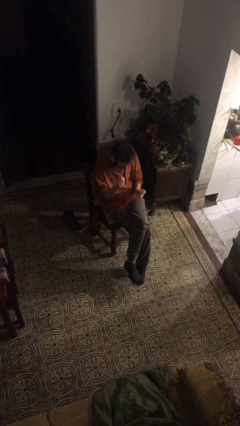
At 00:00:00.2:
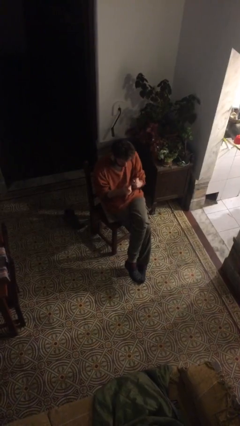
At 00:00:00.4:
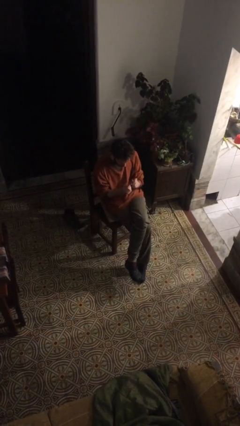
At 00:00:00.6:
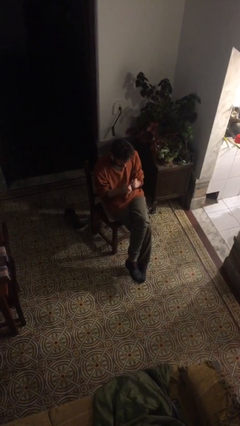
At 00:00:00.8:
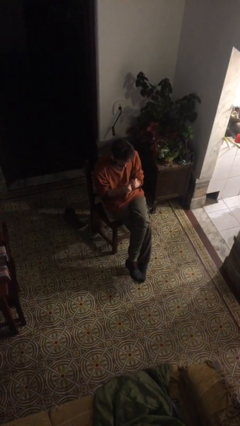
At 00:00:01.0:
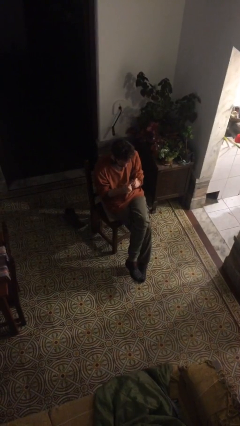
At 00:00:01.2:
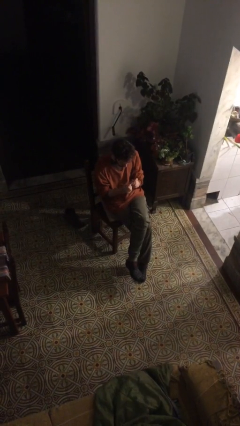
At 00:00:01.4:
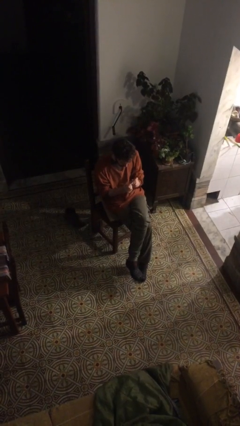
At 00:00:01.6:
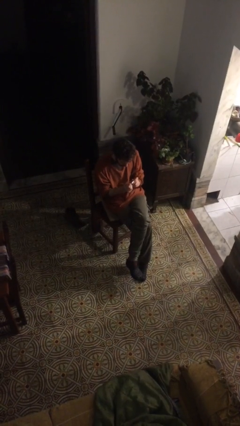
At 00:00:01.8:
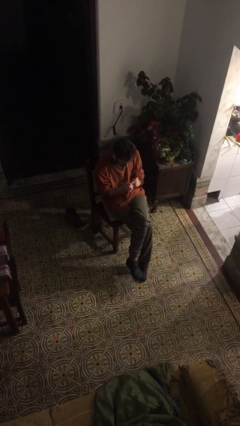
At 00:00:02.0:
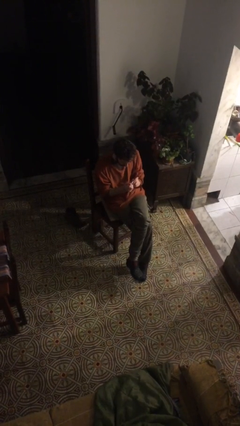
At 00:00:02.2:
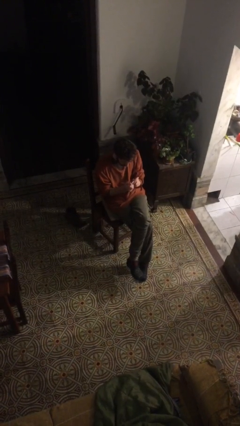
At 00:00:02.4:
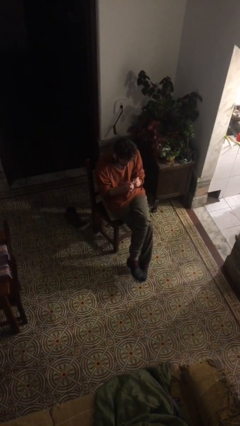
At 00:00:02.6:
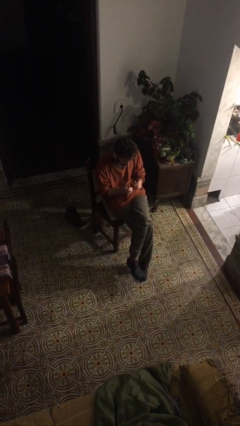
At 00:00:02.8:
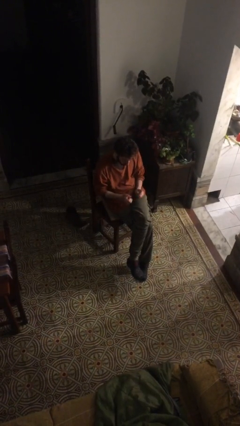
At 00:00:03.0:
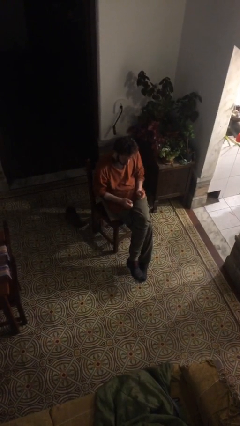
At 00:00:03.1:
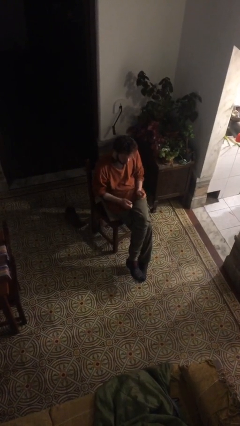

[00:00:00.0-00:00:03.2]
person clips fingernails

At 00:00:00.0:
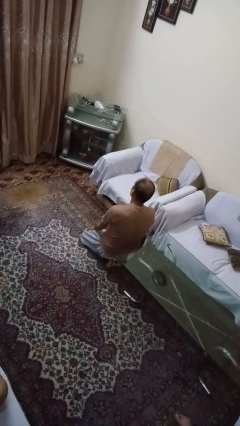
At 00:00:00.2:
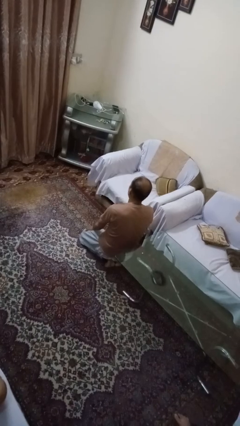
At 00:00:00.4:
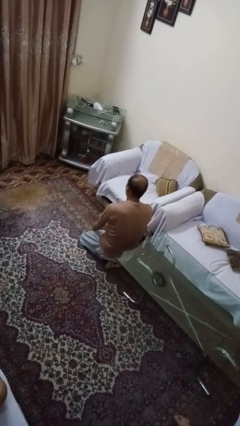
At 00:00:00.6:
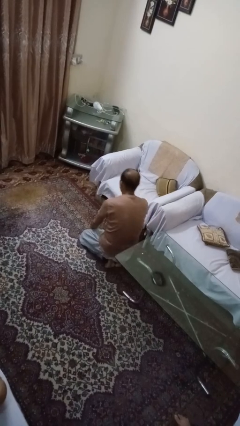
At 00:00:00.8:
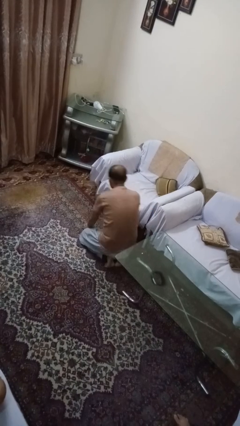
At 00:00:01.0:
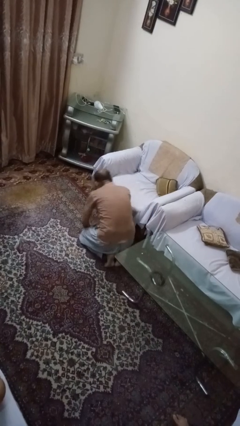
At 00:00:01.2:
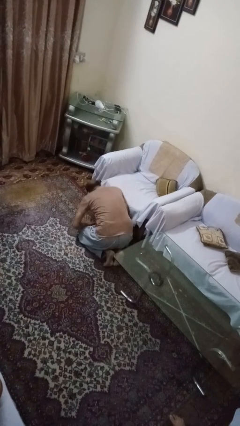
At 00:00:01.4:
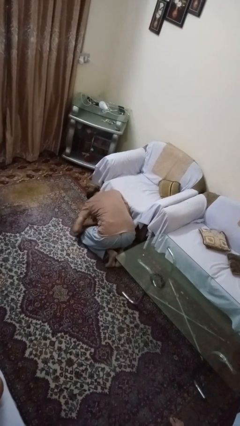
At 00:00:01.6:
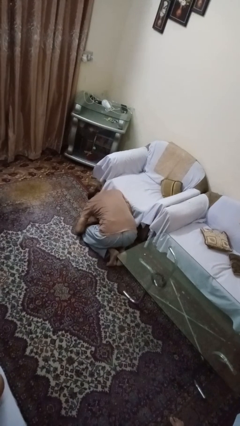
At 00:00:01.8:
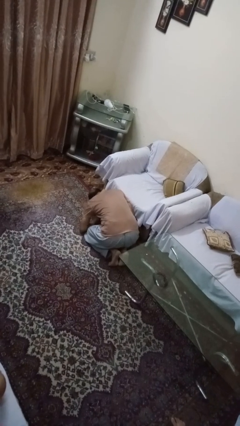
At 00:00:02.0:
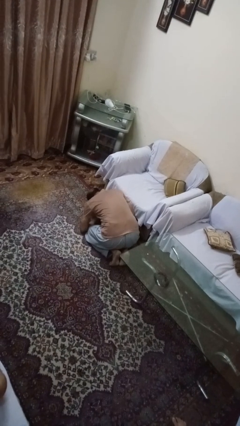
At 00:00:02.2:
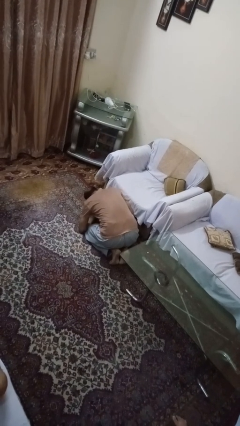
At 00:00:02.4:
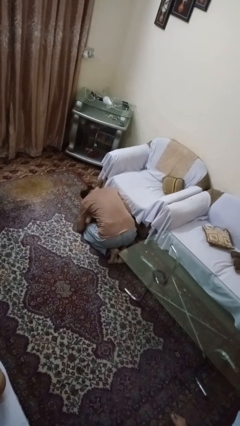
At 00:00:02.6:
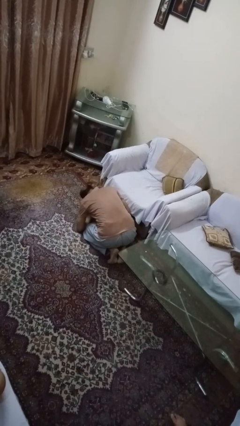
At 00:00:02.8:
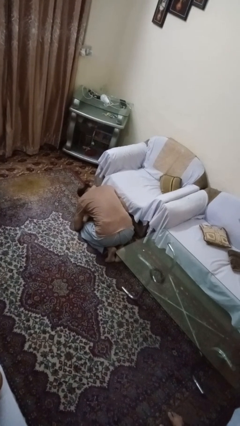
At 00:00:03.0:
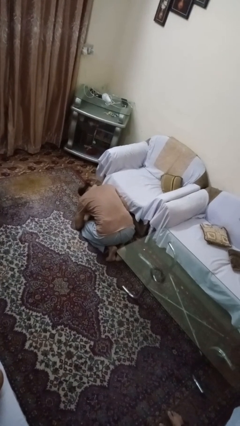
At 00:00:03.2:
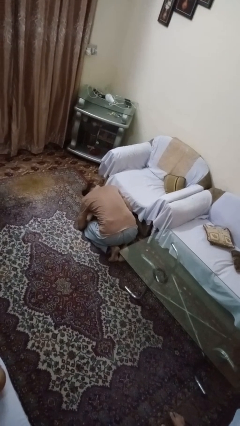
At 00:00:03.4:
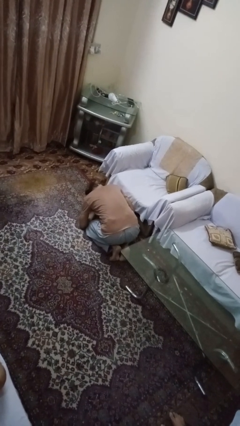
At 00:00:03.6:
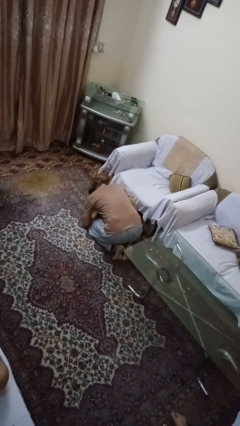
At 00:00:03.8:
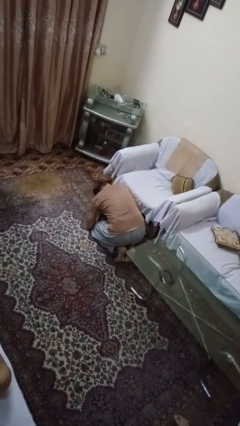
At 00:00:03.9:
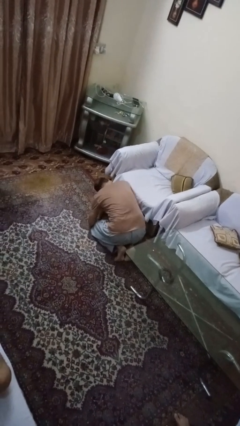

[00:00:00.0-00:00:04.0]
person searches under couch

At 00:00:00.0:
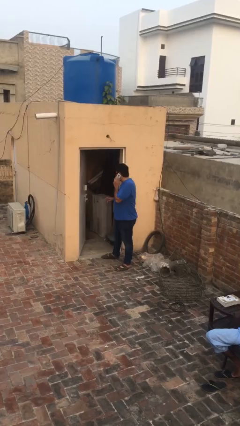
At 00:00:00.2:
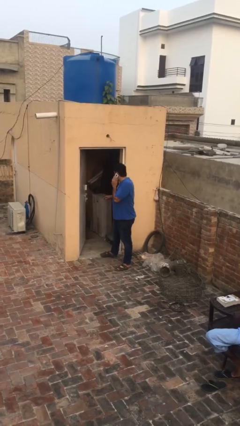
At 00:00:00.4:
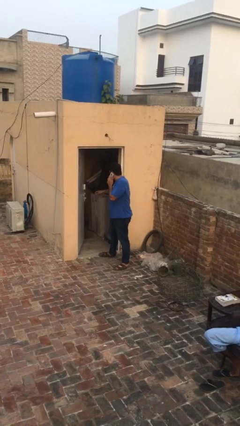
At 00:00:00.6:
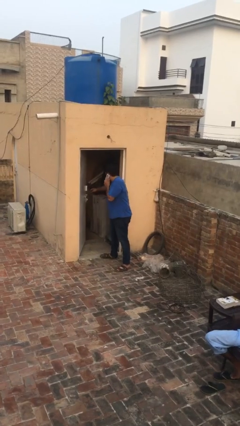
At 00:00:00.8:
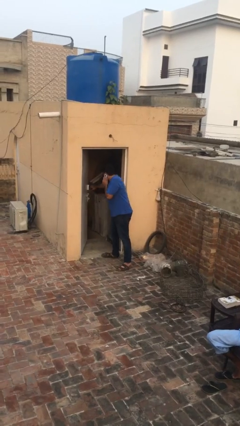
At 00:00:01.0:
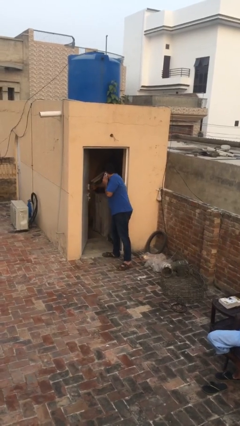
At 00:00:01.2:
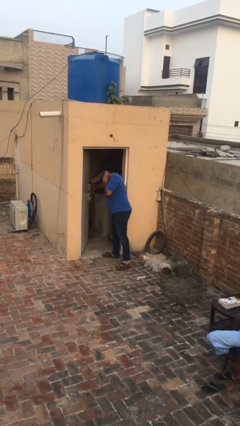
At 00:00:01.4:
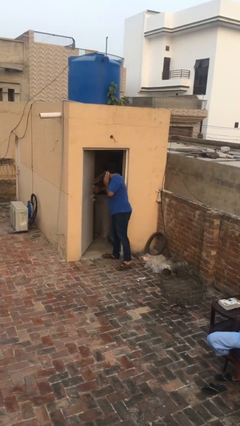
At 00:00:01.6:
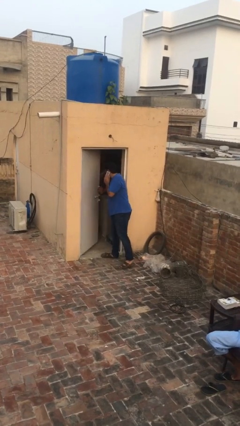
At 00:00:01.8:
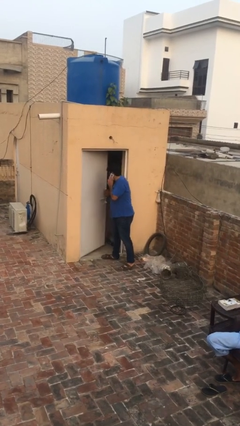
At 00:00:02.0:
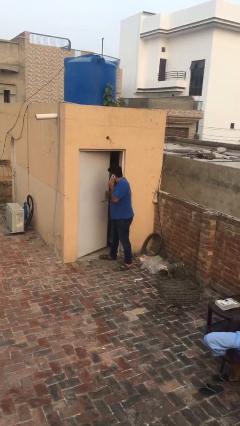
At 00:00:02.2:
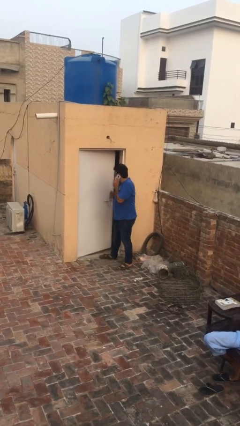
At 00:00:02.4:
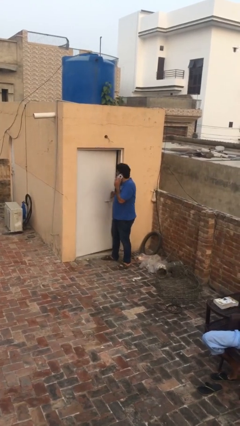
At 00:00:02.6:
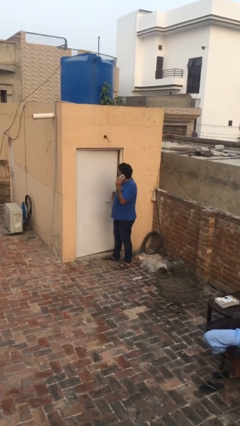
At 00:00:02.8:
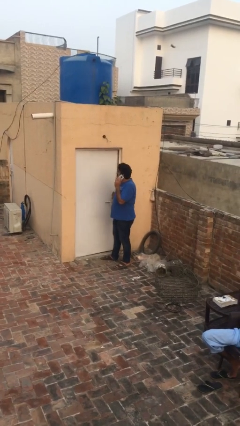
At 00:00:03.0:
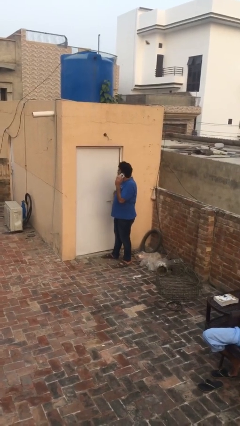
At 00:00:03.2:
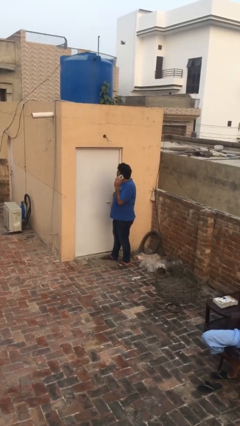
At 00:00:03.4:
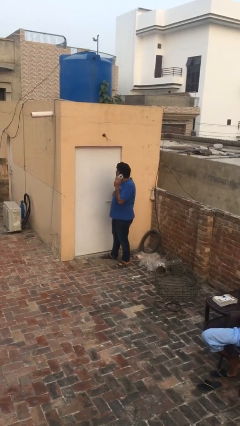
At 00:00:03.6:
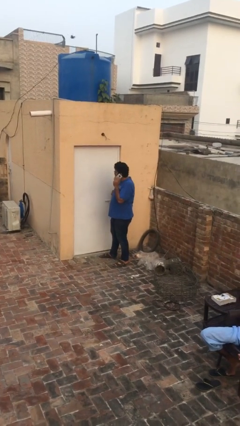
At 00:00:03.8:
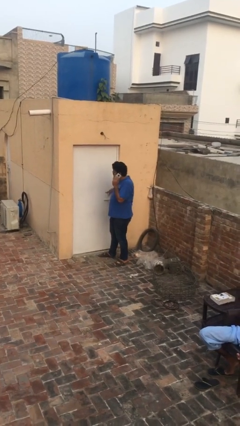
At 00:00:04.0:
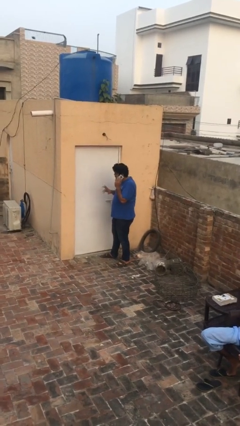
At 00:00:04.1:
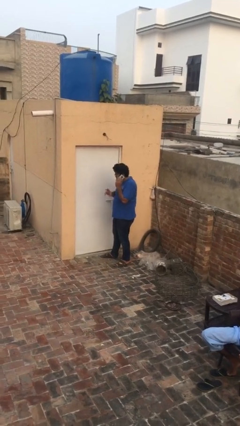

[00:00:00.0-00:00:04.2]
person closes facility door

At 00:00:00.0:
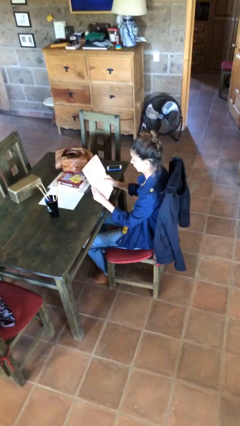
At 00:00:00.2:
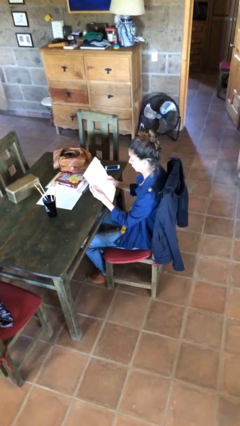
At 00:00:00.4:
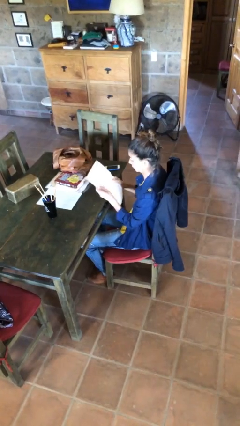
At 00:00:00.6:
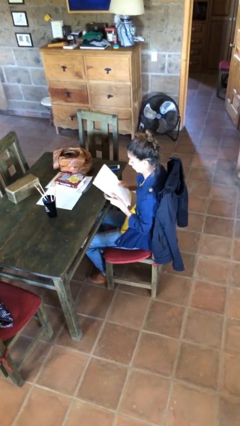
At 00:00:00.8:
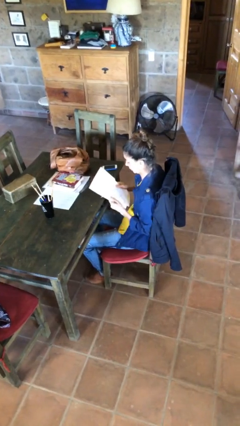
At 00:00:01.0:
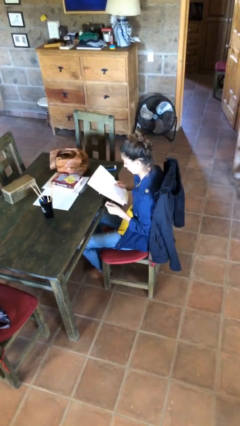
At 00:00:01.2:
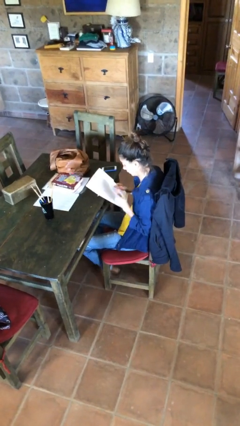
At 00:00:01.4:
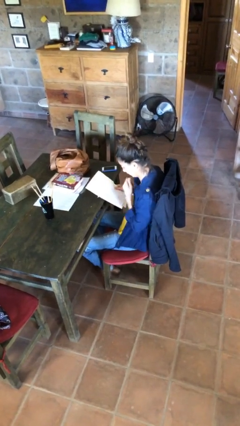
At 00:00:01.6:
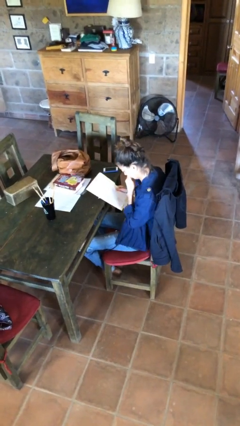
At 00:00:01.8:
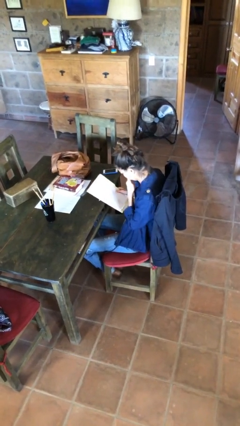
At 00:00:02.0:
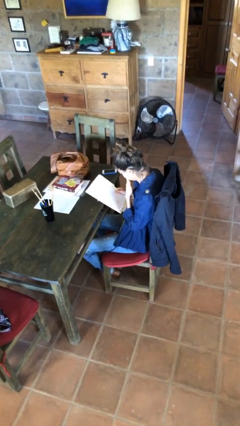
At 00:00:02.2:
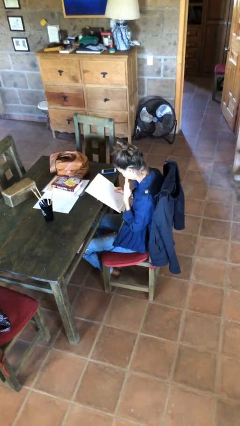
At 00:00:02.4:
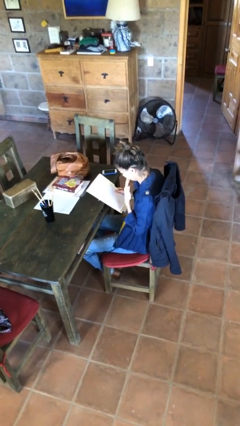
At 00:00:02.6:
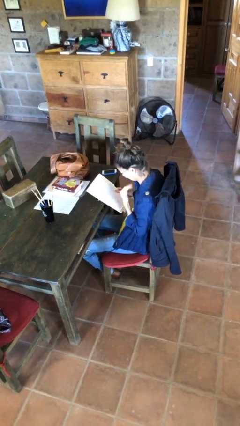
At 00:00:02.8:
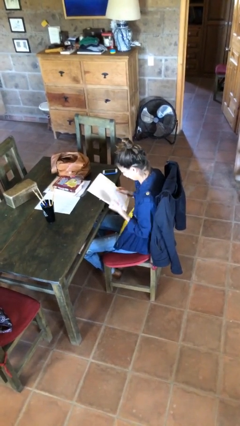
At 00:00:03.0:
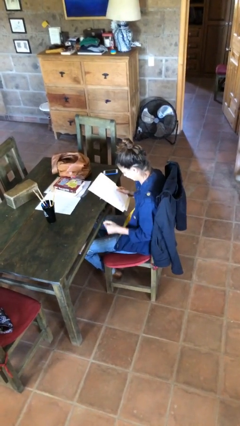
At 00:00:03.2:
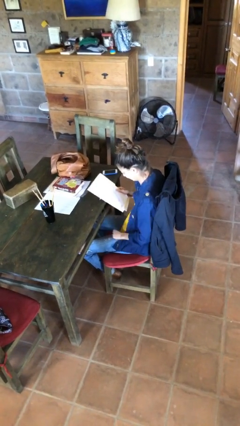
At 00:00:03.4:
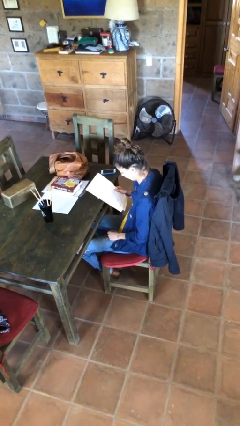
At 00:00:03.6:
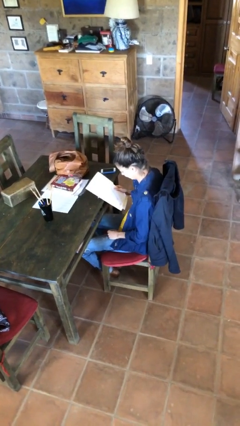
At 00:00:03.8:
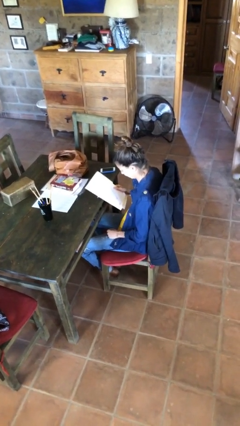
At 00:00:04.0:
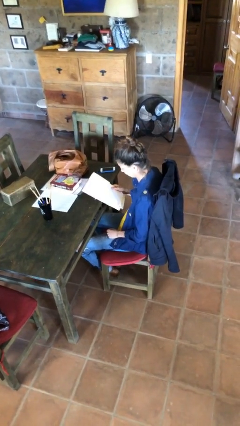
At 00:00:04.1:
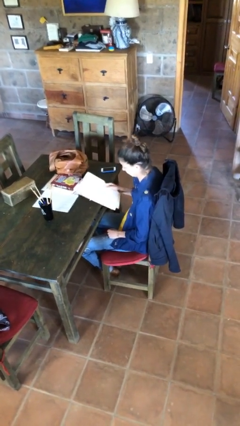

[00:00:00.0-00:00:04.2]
person reads document

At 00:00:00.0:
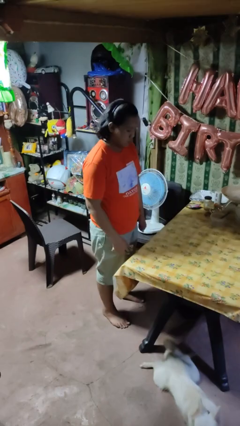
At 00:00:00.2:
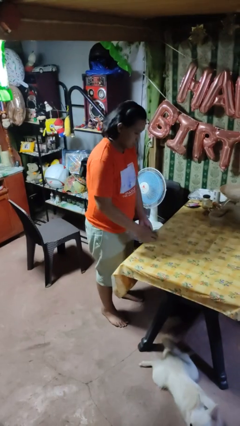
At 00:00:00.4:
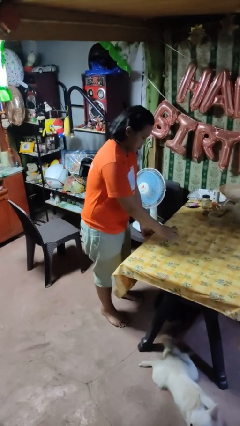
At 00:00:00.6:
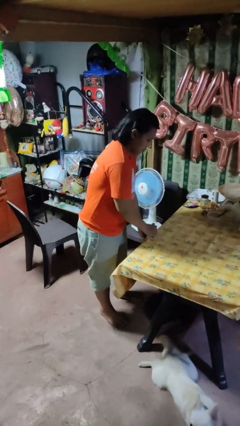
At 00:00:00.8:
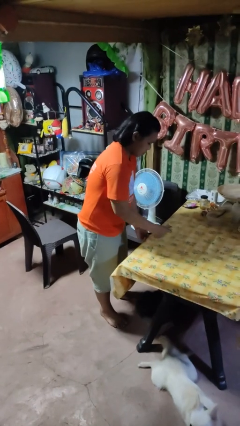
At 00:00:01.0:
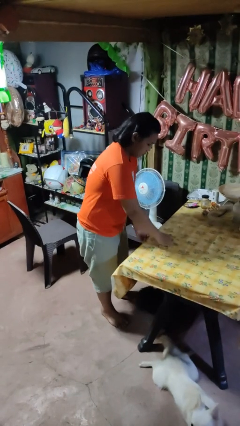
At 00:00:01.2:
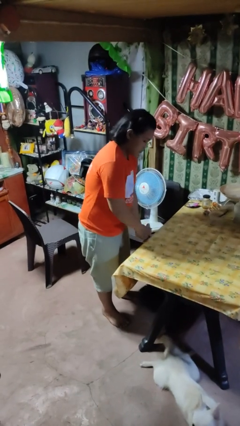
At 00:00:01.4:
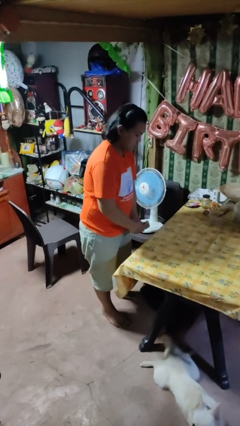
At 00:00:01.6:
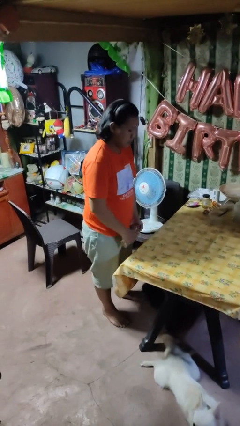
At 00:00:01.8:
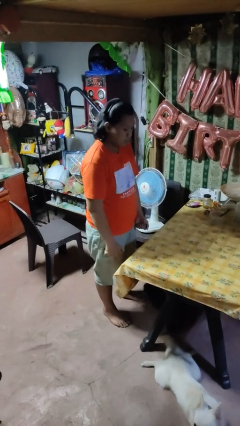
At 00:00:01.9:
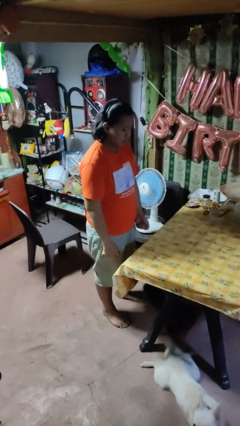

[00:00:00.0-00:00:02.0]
person cleans table with rag
